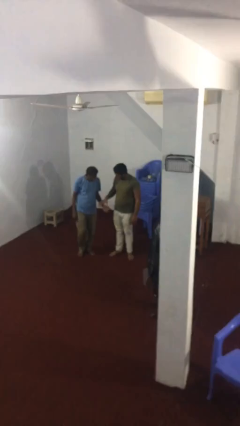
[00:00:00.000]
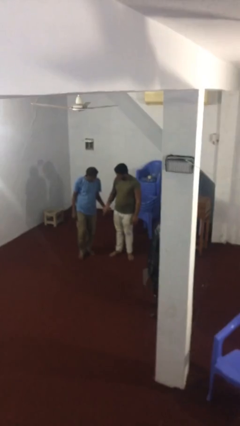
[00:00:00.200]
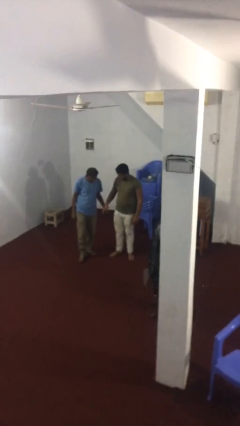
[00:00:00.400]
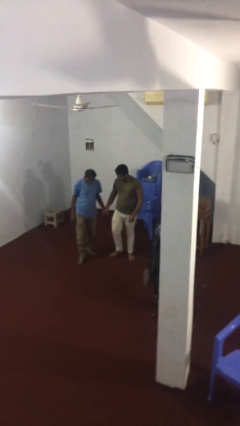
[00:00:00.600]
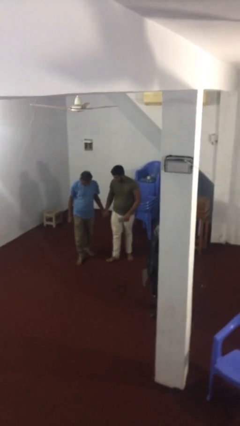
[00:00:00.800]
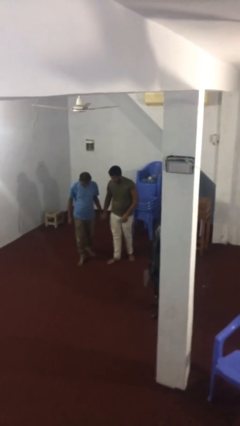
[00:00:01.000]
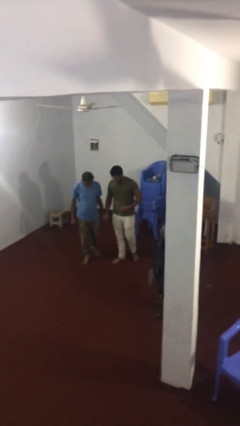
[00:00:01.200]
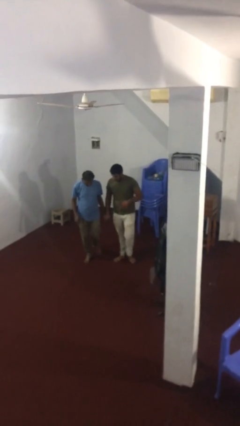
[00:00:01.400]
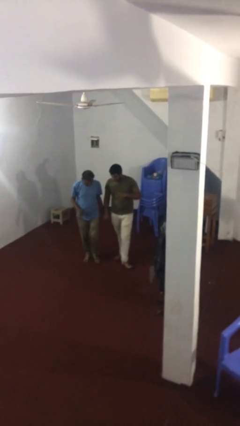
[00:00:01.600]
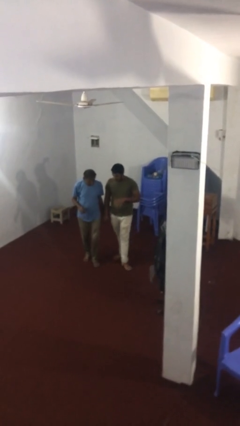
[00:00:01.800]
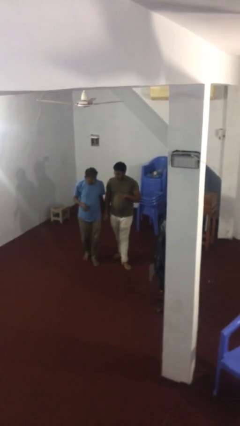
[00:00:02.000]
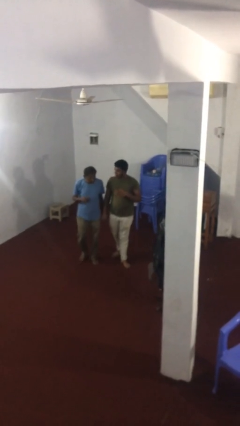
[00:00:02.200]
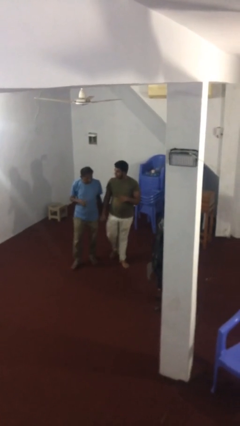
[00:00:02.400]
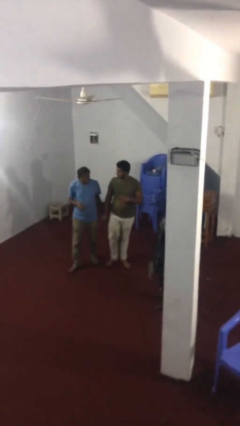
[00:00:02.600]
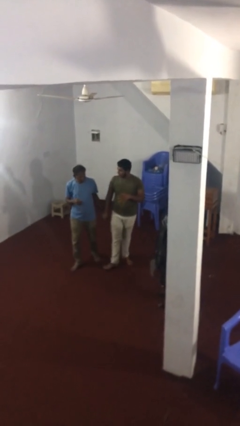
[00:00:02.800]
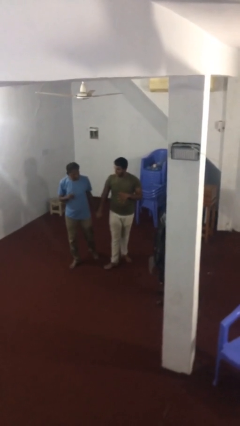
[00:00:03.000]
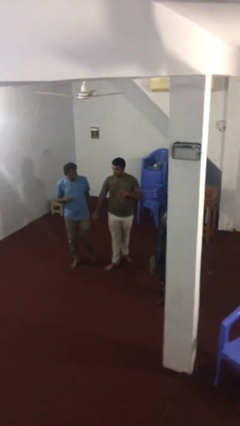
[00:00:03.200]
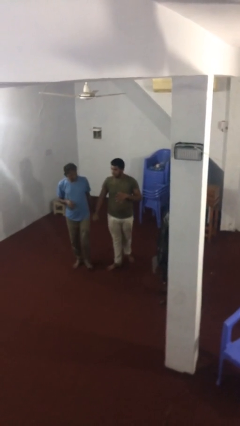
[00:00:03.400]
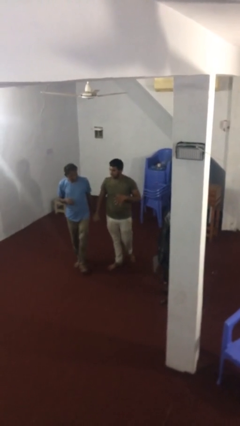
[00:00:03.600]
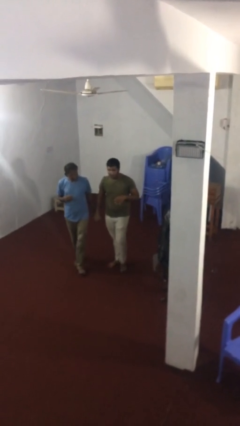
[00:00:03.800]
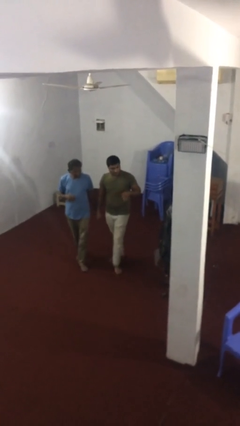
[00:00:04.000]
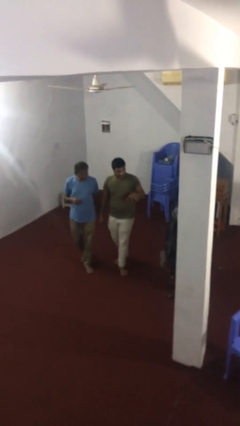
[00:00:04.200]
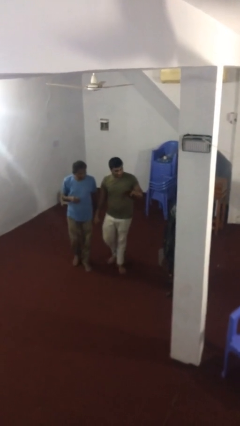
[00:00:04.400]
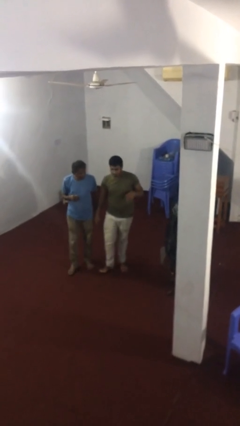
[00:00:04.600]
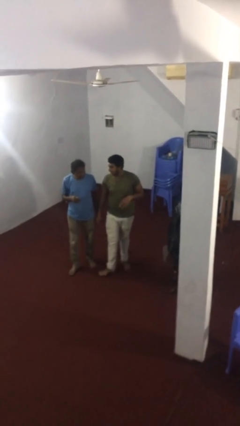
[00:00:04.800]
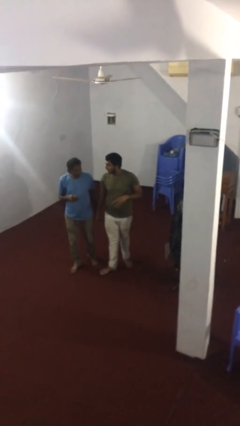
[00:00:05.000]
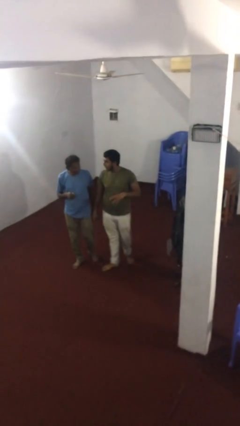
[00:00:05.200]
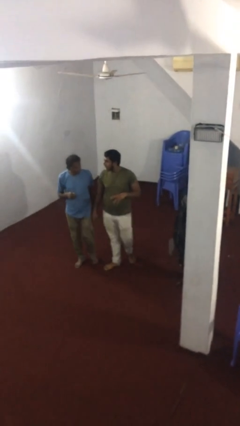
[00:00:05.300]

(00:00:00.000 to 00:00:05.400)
person holds hand

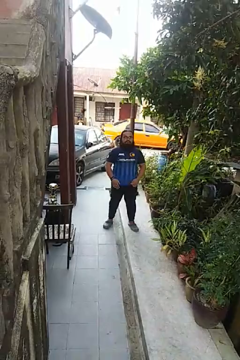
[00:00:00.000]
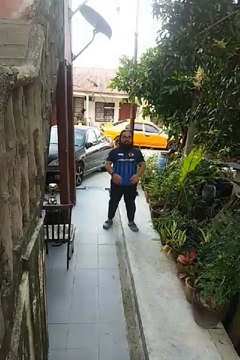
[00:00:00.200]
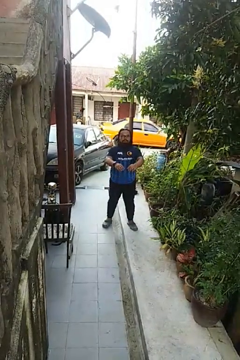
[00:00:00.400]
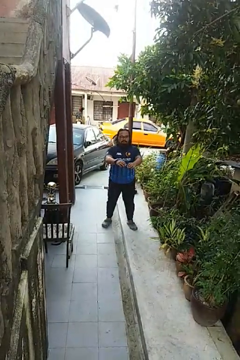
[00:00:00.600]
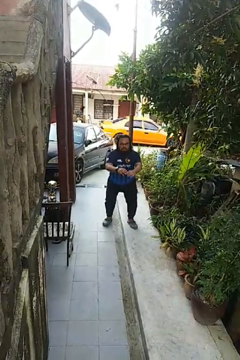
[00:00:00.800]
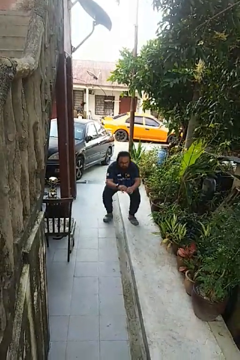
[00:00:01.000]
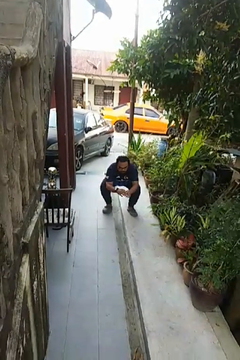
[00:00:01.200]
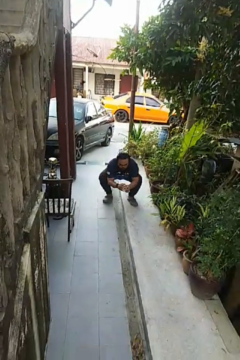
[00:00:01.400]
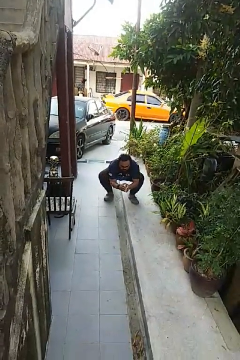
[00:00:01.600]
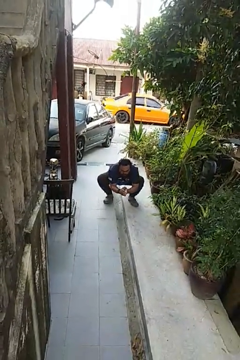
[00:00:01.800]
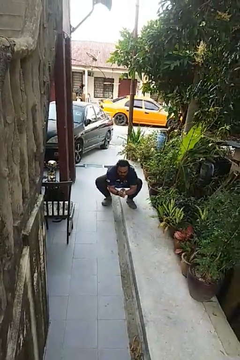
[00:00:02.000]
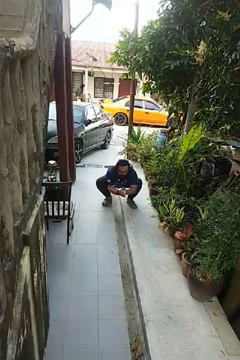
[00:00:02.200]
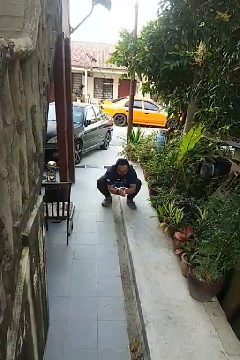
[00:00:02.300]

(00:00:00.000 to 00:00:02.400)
person squats

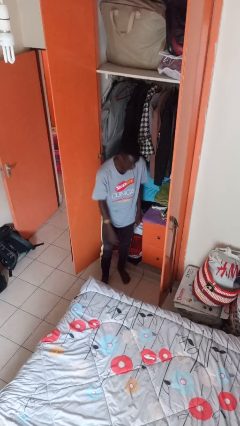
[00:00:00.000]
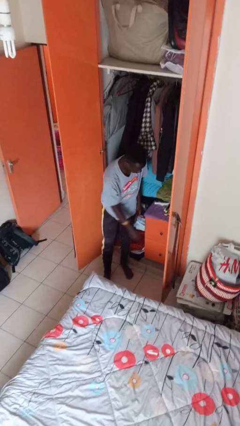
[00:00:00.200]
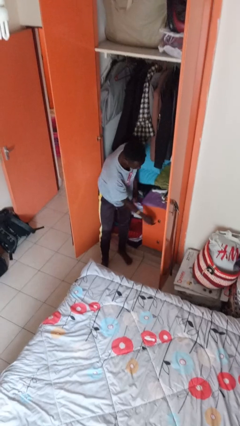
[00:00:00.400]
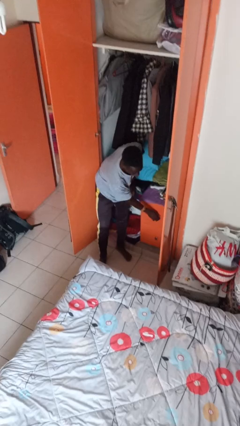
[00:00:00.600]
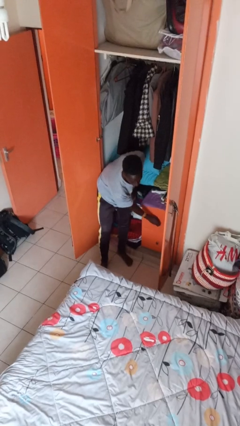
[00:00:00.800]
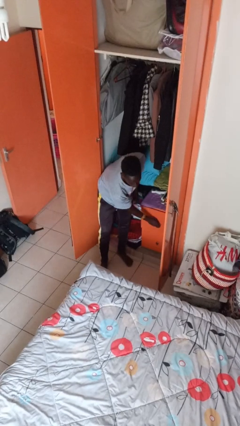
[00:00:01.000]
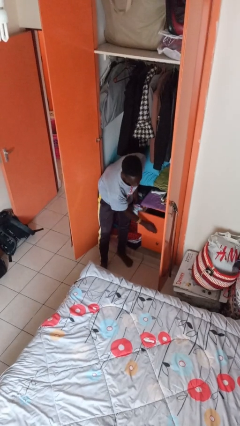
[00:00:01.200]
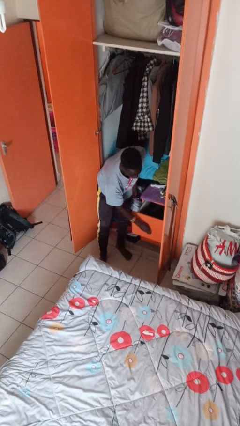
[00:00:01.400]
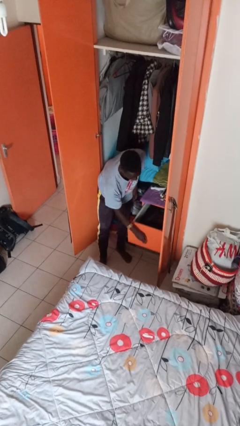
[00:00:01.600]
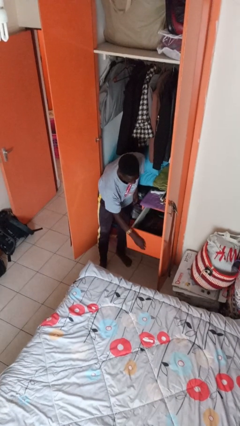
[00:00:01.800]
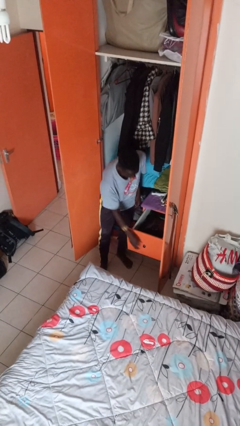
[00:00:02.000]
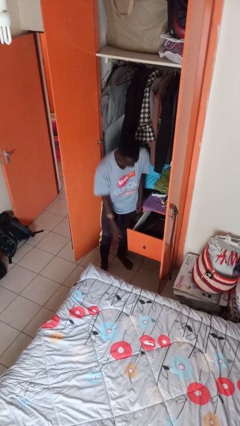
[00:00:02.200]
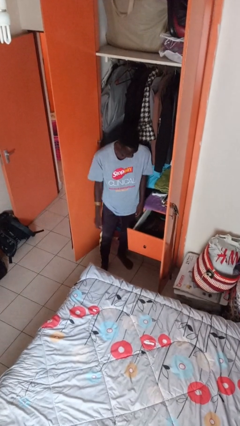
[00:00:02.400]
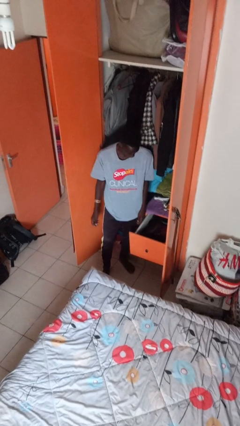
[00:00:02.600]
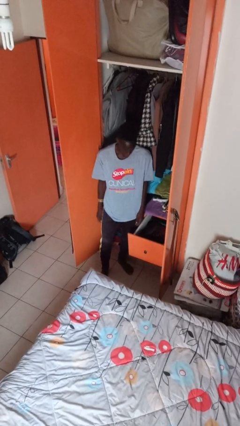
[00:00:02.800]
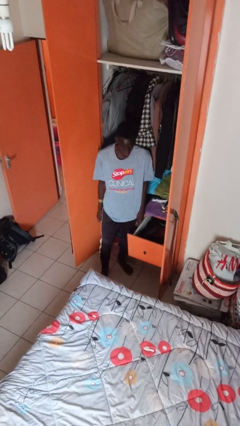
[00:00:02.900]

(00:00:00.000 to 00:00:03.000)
person opens dresser drawer

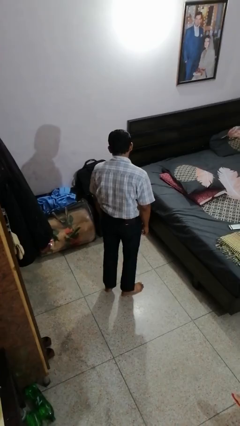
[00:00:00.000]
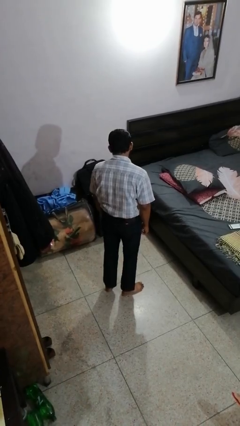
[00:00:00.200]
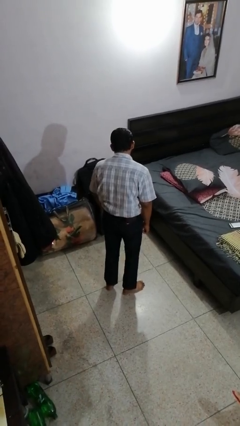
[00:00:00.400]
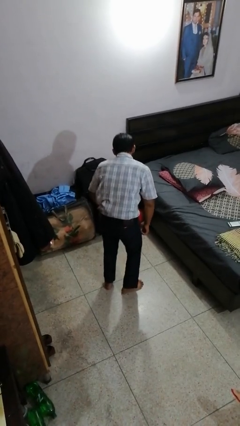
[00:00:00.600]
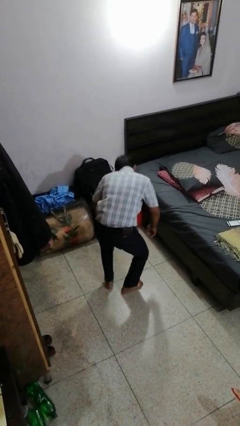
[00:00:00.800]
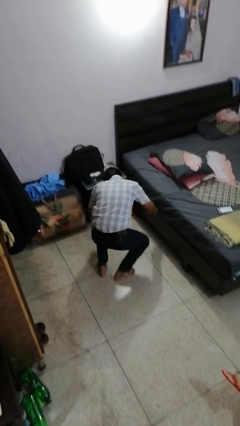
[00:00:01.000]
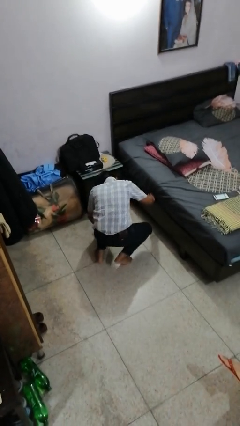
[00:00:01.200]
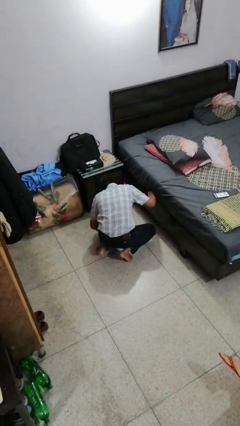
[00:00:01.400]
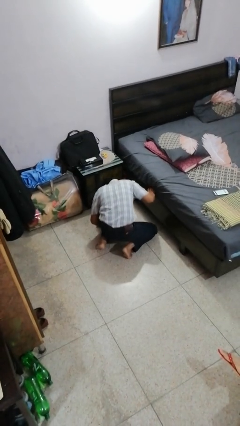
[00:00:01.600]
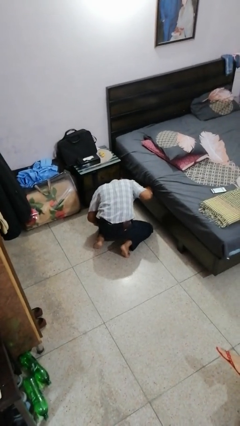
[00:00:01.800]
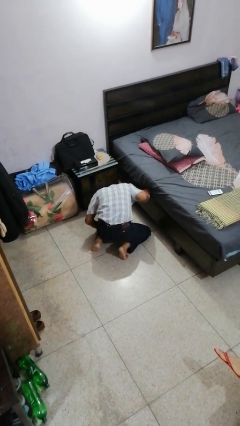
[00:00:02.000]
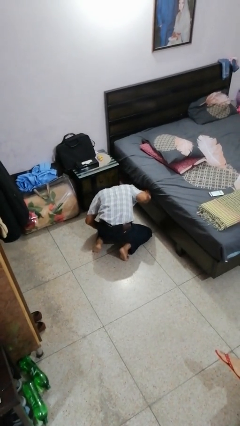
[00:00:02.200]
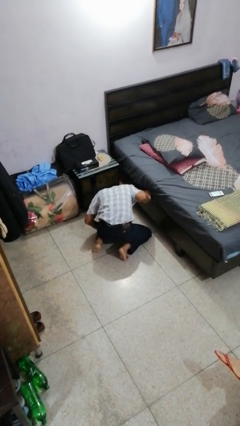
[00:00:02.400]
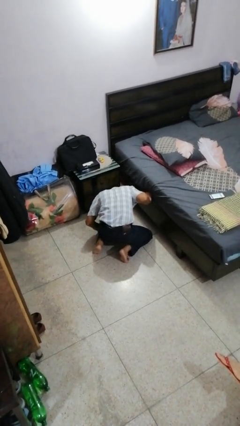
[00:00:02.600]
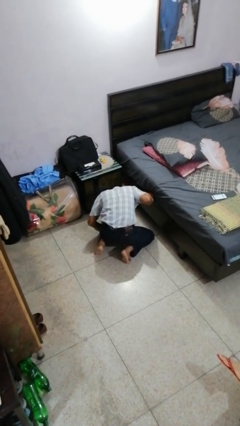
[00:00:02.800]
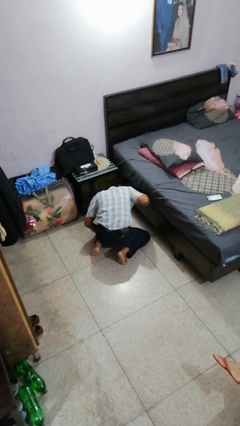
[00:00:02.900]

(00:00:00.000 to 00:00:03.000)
person searches under bed

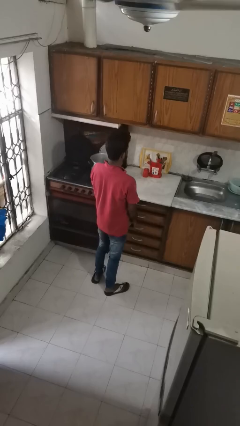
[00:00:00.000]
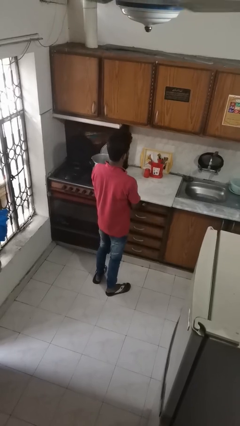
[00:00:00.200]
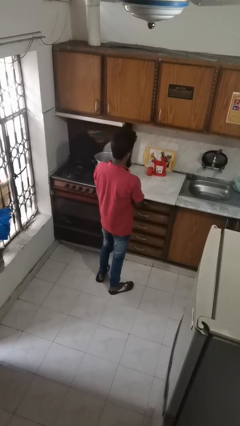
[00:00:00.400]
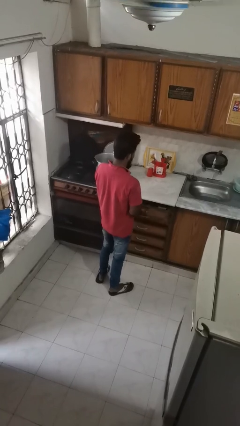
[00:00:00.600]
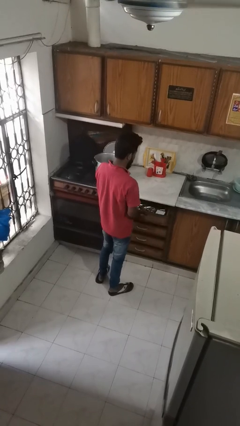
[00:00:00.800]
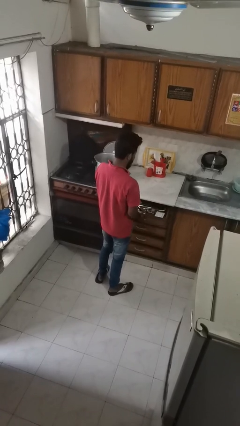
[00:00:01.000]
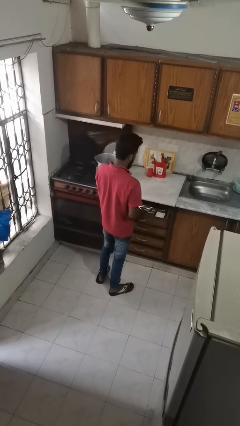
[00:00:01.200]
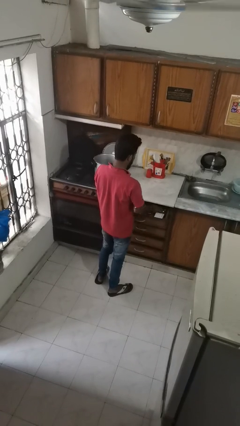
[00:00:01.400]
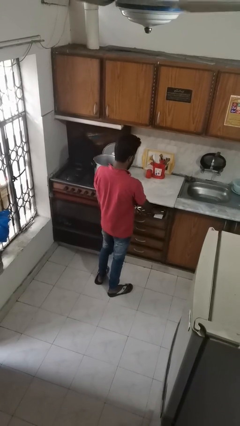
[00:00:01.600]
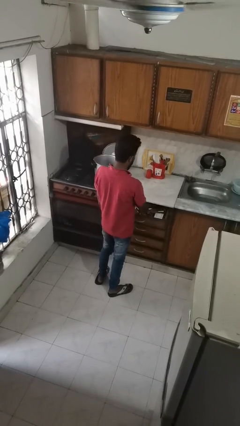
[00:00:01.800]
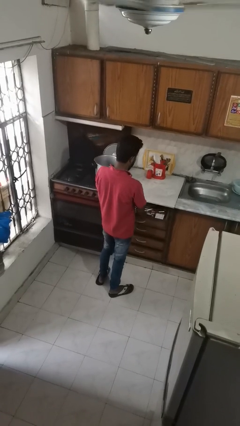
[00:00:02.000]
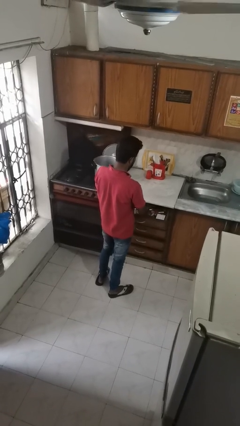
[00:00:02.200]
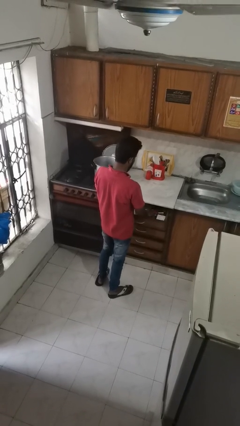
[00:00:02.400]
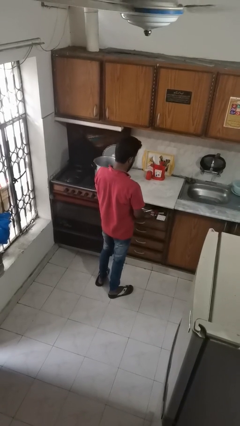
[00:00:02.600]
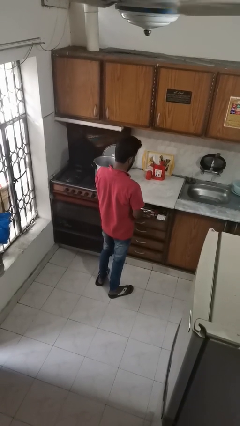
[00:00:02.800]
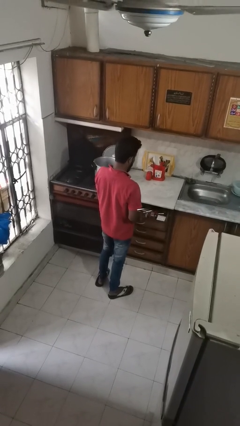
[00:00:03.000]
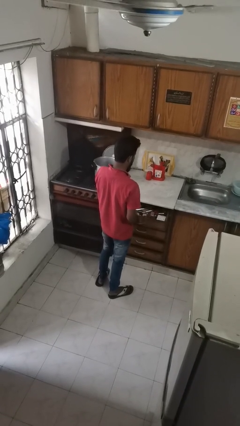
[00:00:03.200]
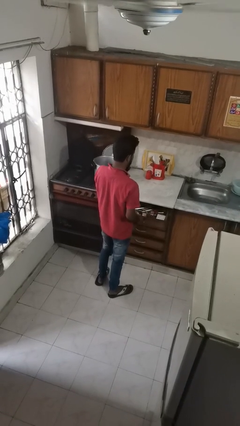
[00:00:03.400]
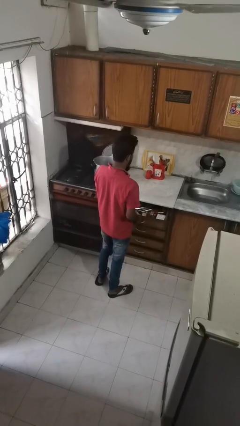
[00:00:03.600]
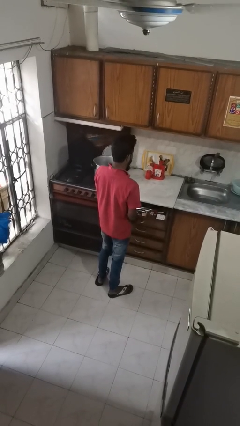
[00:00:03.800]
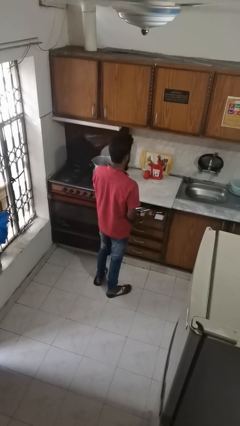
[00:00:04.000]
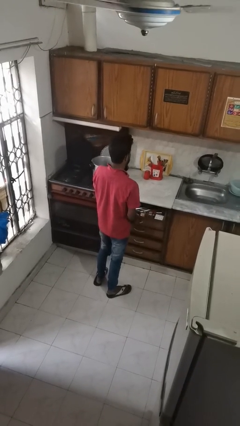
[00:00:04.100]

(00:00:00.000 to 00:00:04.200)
person searches in kitchen drawer
